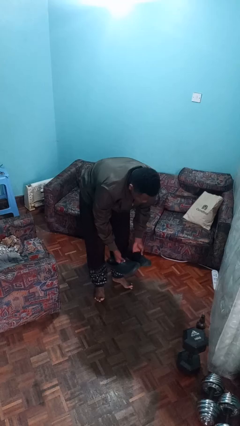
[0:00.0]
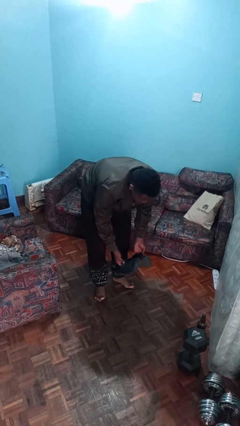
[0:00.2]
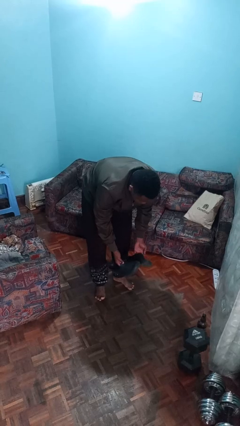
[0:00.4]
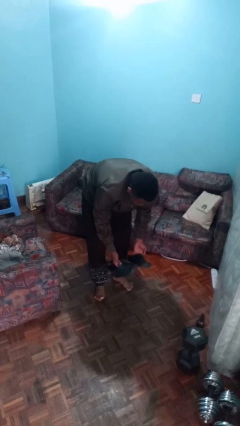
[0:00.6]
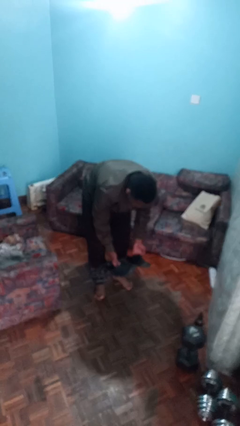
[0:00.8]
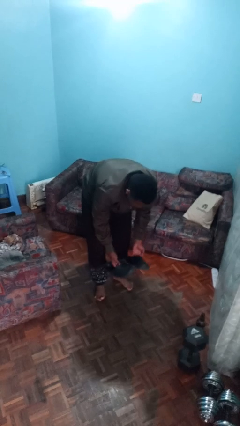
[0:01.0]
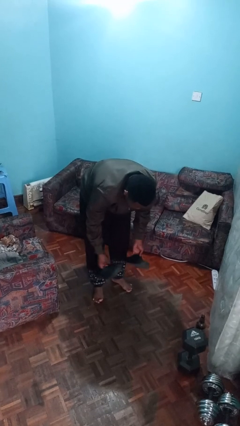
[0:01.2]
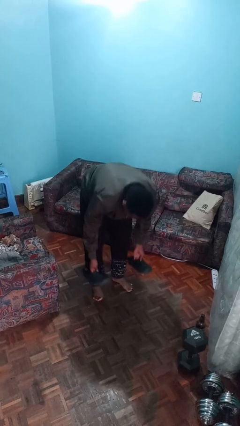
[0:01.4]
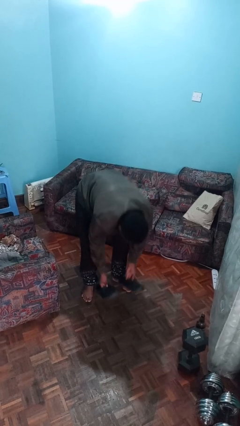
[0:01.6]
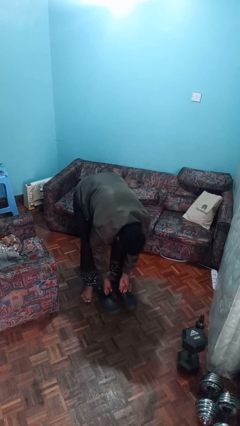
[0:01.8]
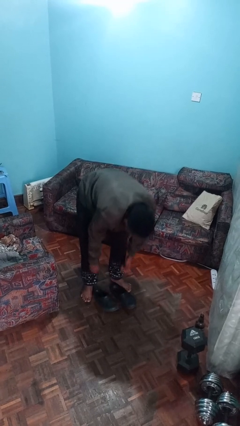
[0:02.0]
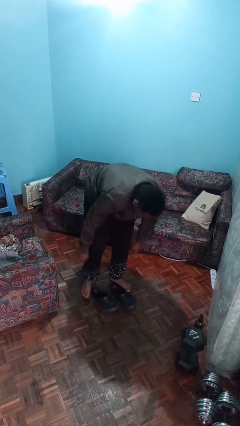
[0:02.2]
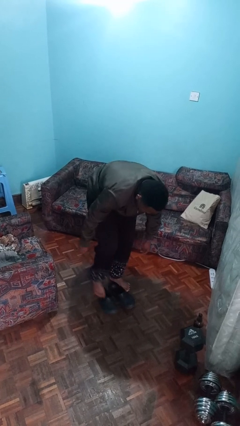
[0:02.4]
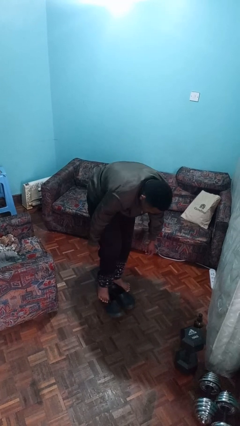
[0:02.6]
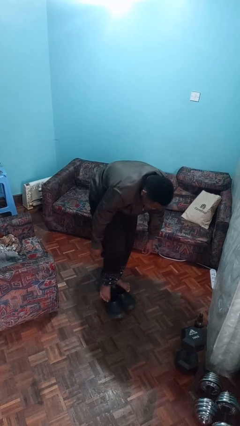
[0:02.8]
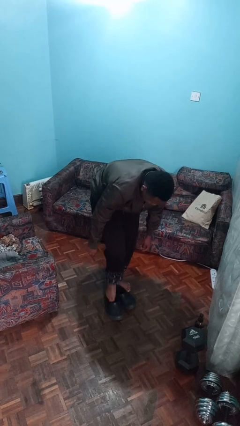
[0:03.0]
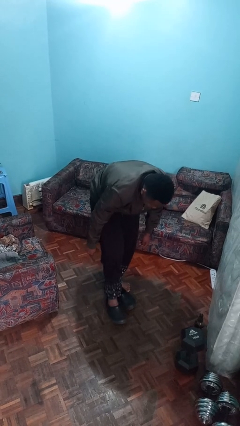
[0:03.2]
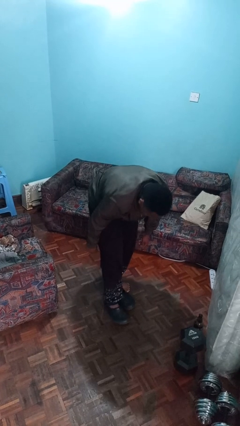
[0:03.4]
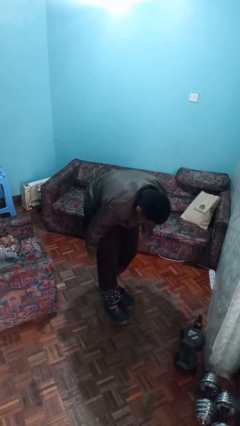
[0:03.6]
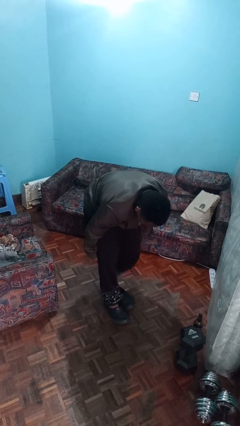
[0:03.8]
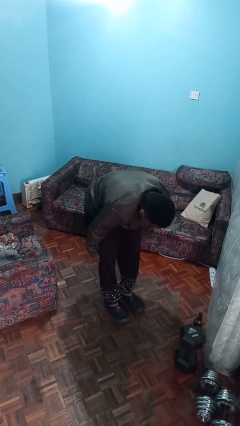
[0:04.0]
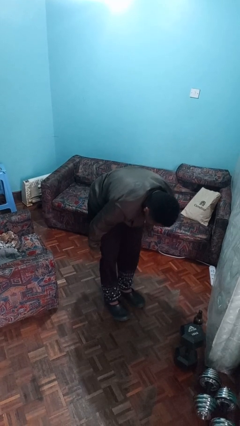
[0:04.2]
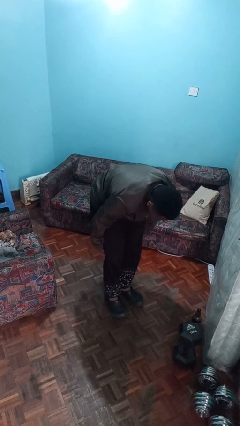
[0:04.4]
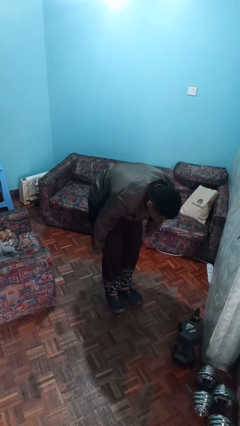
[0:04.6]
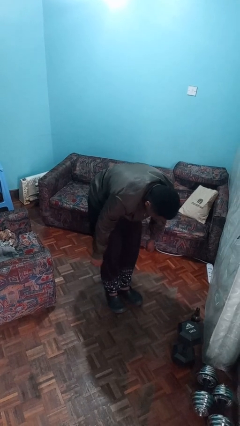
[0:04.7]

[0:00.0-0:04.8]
person puts on shoes

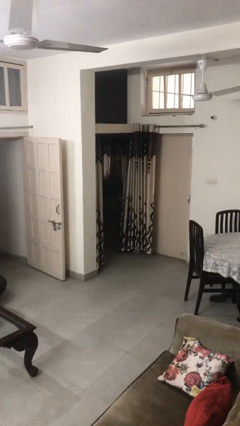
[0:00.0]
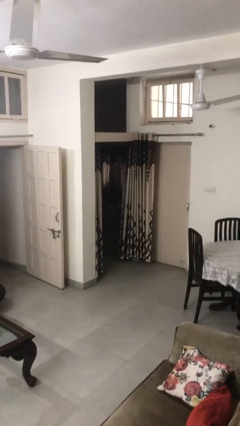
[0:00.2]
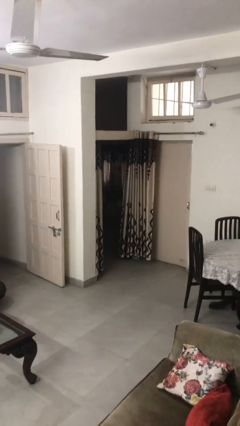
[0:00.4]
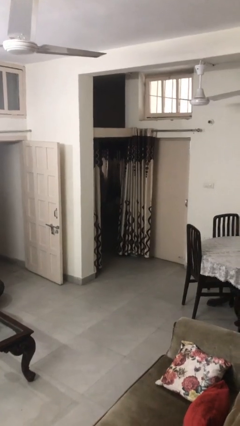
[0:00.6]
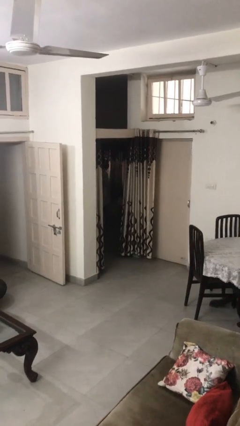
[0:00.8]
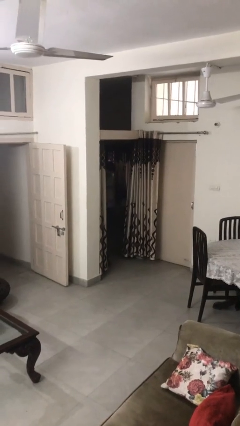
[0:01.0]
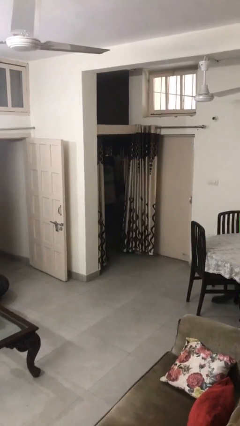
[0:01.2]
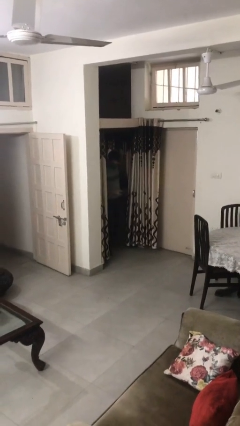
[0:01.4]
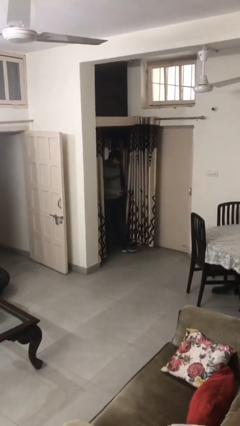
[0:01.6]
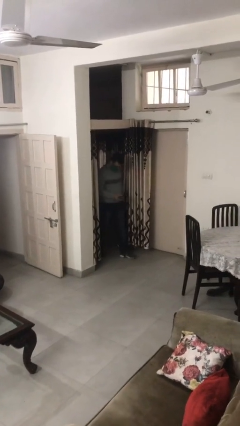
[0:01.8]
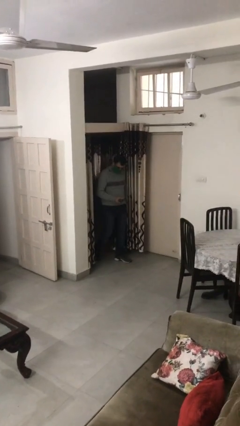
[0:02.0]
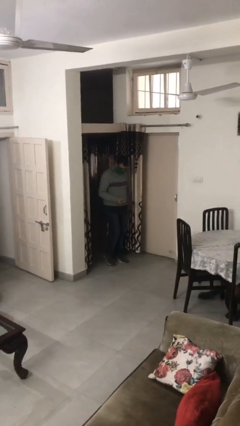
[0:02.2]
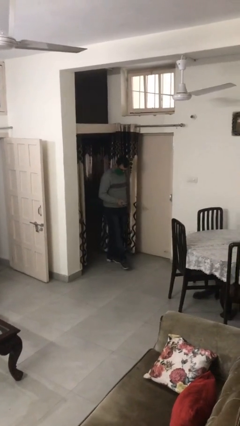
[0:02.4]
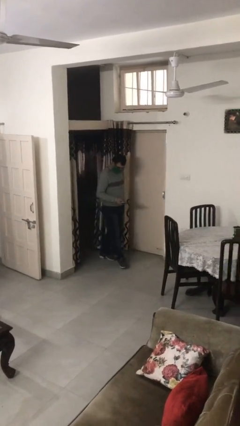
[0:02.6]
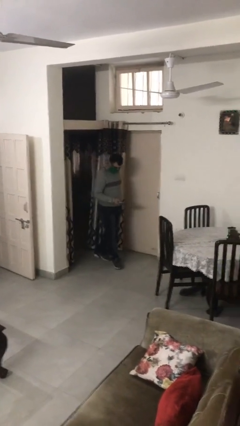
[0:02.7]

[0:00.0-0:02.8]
person enters scene through structure

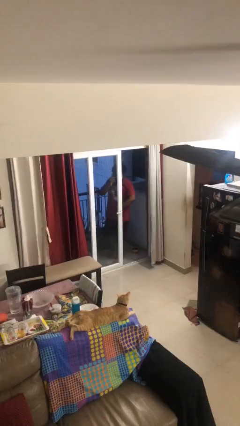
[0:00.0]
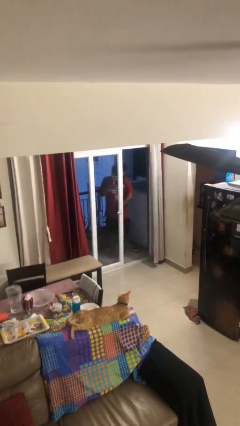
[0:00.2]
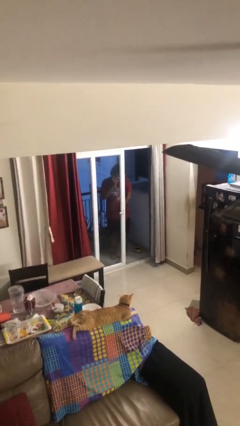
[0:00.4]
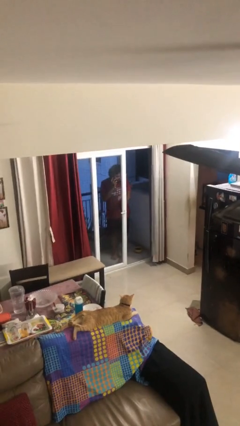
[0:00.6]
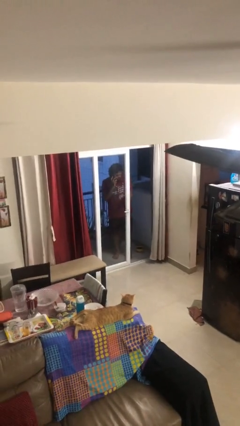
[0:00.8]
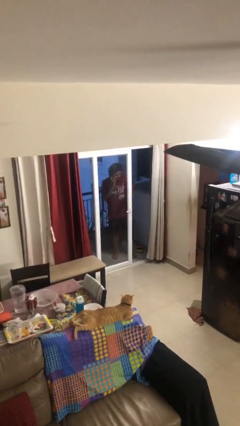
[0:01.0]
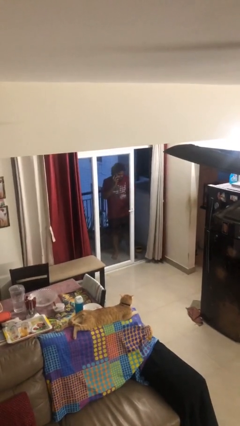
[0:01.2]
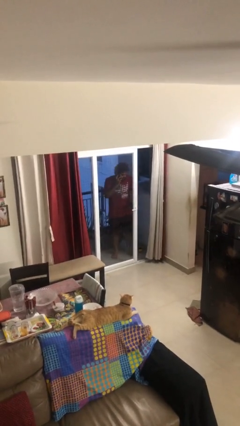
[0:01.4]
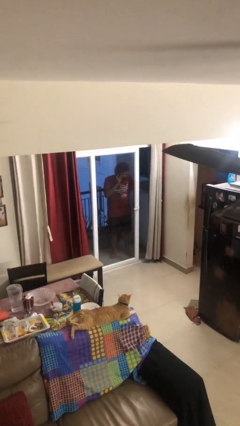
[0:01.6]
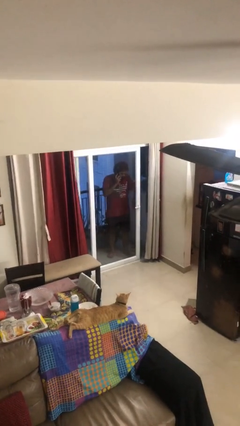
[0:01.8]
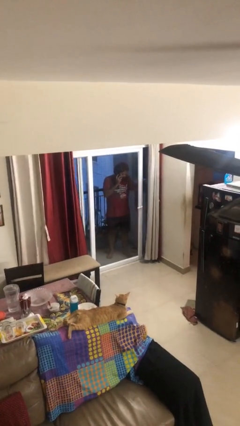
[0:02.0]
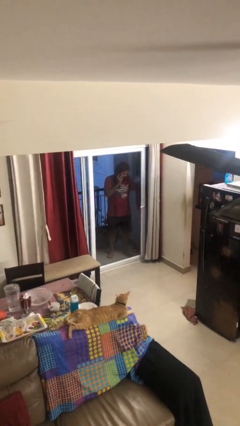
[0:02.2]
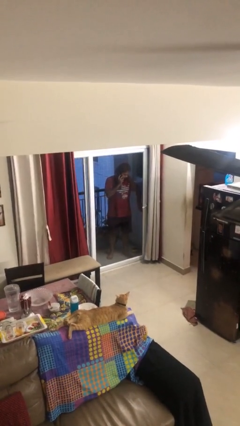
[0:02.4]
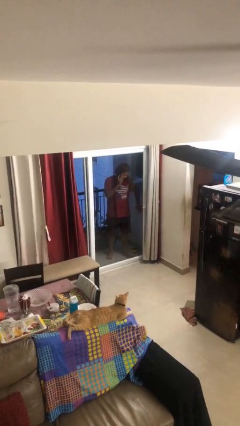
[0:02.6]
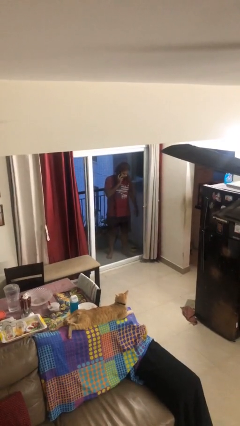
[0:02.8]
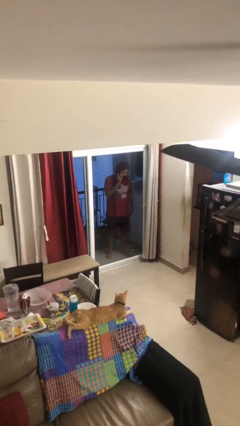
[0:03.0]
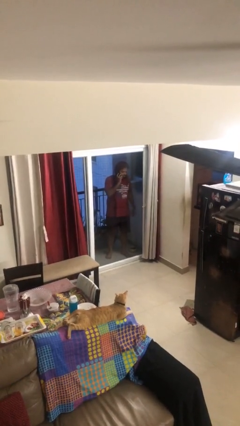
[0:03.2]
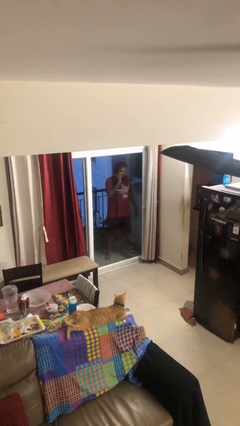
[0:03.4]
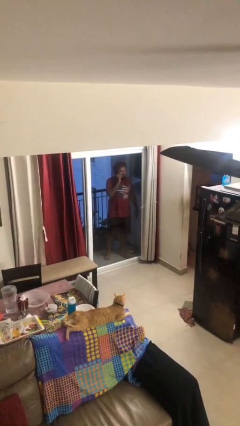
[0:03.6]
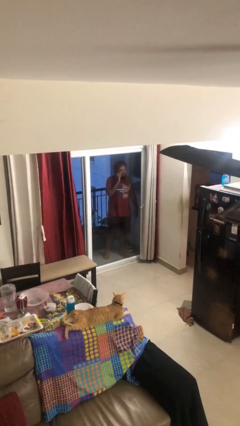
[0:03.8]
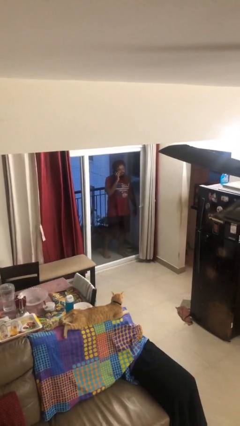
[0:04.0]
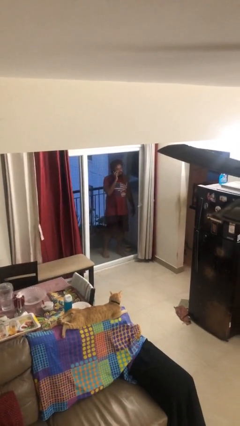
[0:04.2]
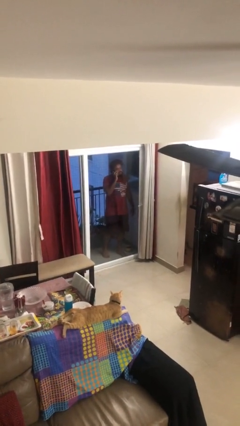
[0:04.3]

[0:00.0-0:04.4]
person closes facility door

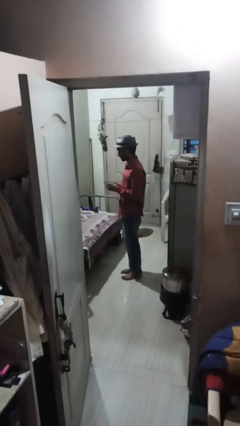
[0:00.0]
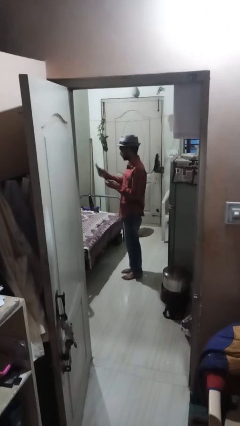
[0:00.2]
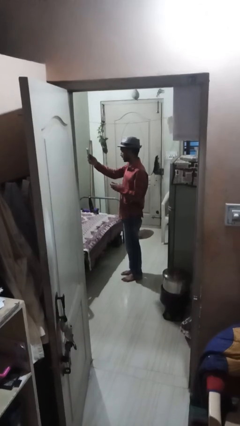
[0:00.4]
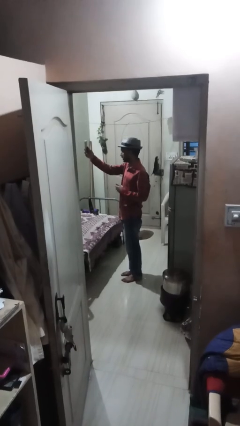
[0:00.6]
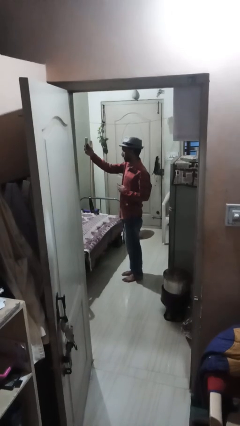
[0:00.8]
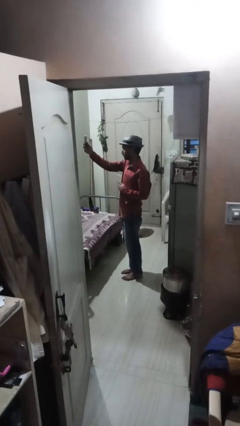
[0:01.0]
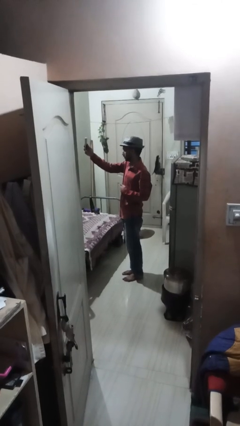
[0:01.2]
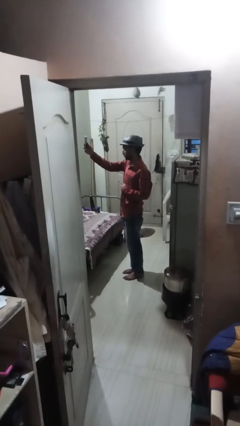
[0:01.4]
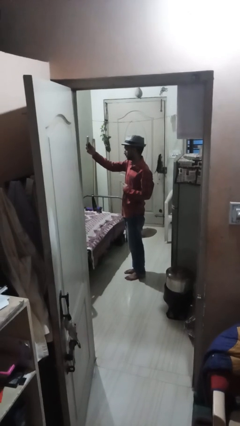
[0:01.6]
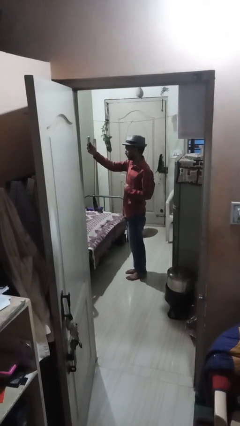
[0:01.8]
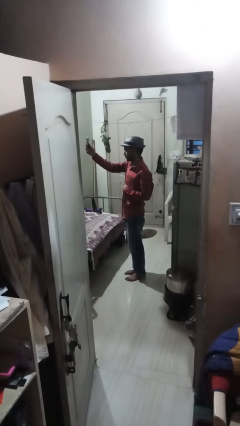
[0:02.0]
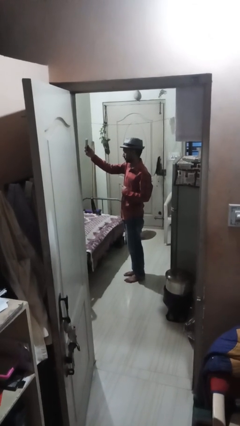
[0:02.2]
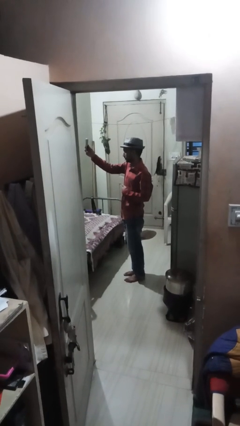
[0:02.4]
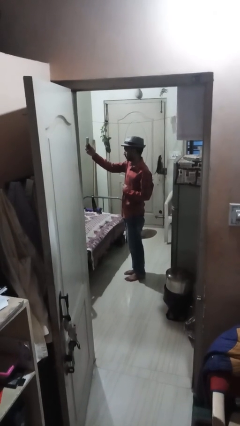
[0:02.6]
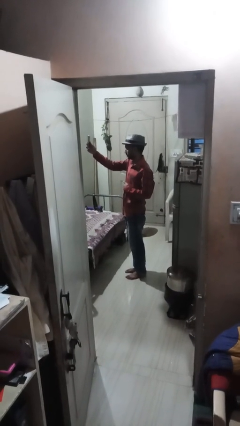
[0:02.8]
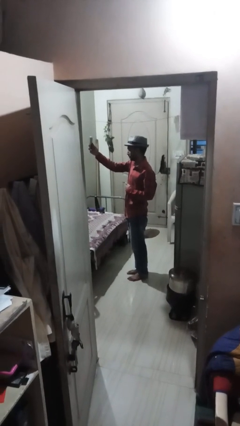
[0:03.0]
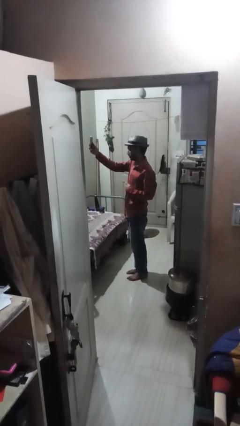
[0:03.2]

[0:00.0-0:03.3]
person takes selfie

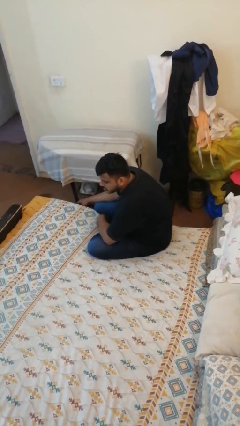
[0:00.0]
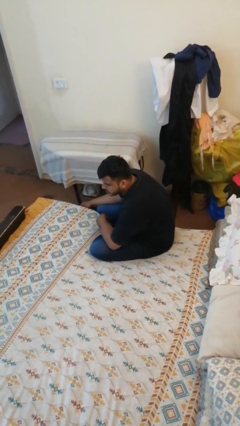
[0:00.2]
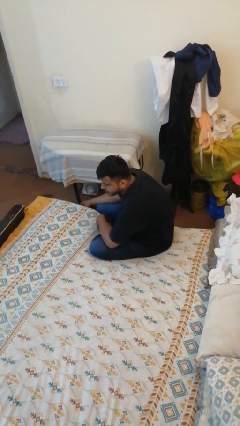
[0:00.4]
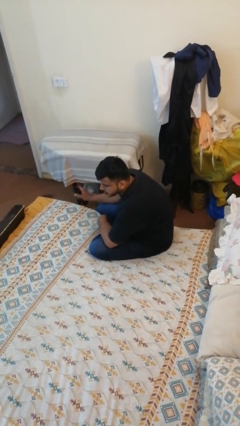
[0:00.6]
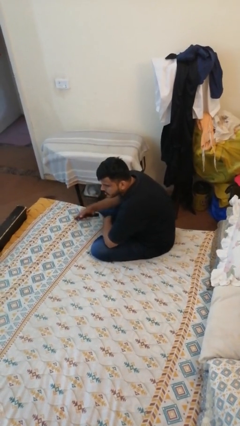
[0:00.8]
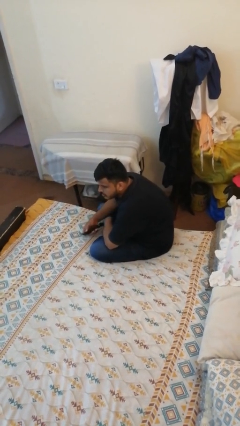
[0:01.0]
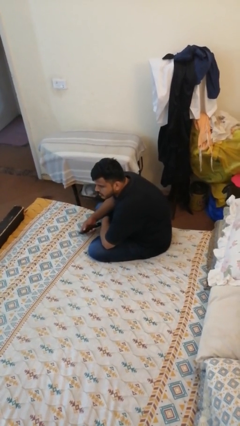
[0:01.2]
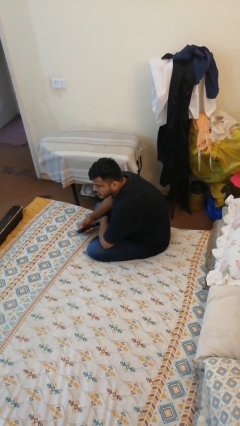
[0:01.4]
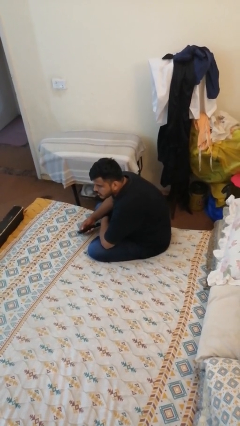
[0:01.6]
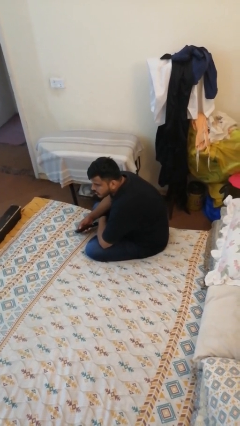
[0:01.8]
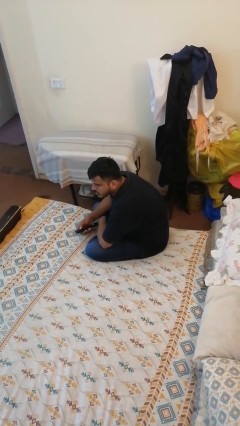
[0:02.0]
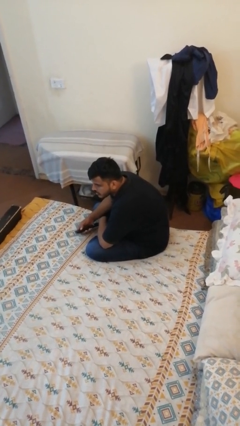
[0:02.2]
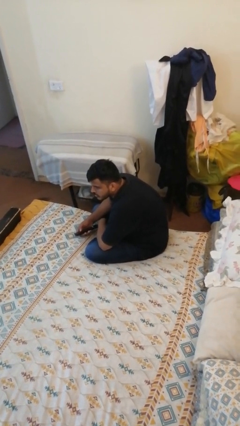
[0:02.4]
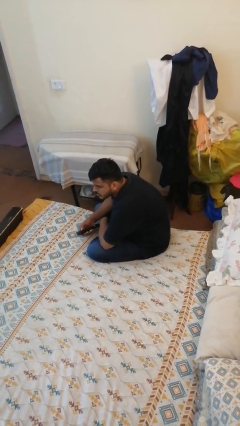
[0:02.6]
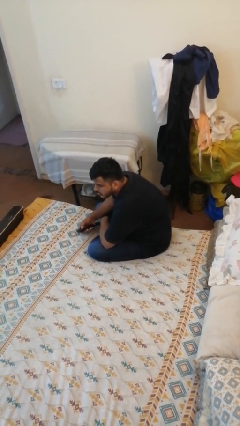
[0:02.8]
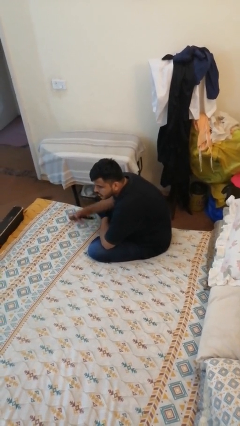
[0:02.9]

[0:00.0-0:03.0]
person uses television remote
